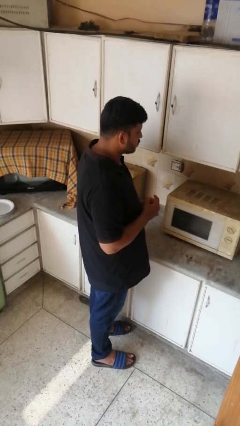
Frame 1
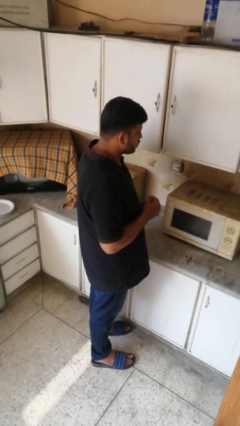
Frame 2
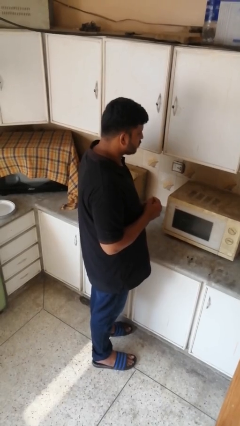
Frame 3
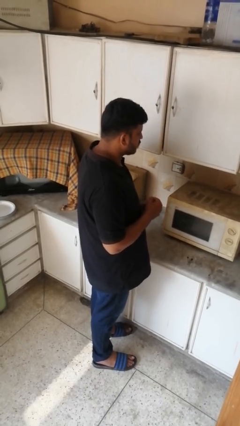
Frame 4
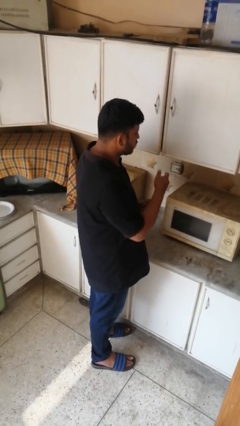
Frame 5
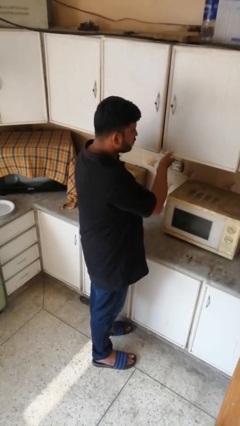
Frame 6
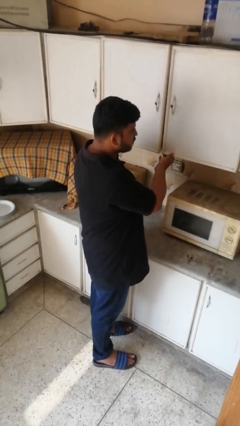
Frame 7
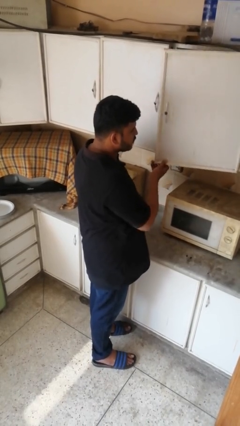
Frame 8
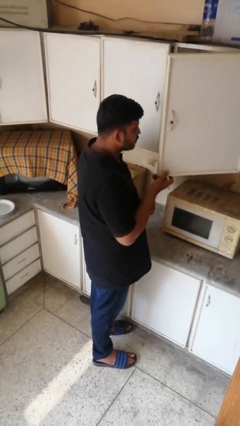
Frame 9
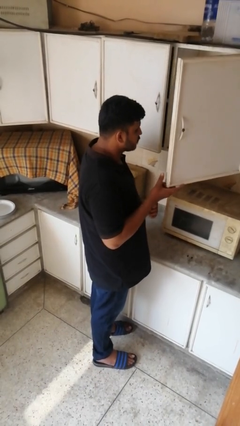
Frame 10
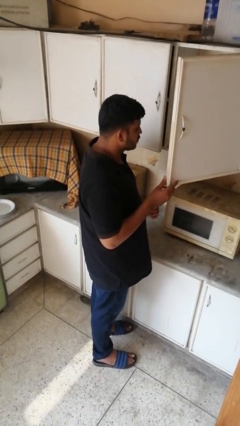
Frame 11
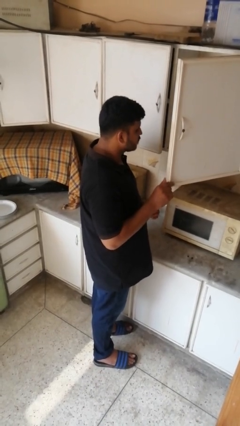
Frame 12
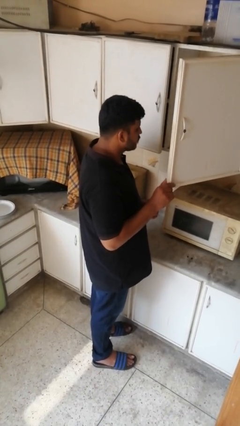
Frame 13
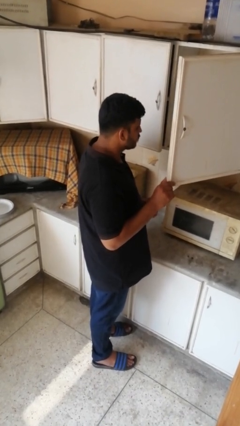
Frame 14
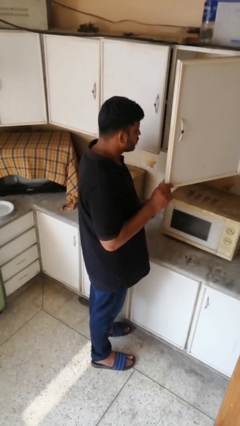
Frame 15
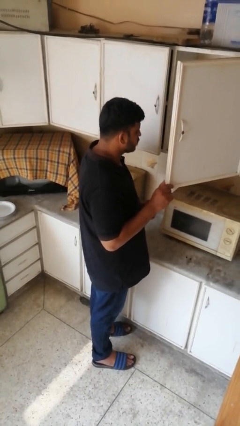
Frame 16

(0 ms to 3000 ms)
person opens cabinet

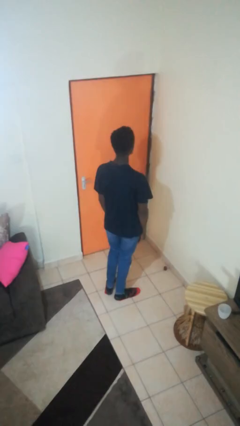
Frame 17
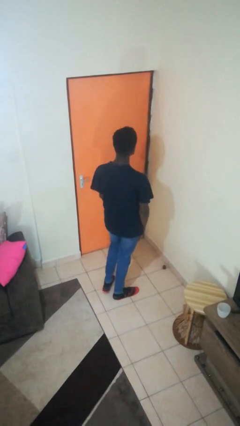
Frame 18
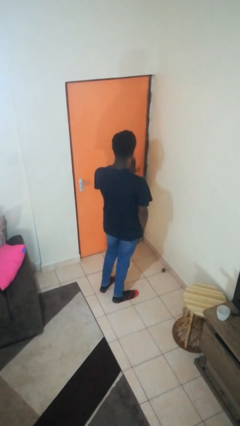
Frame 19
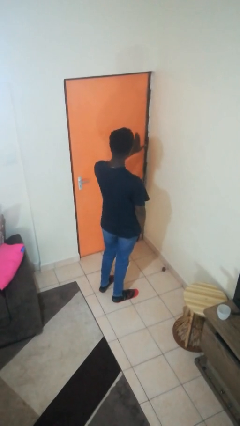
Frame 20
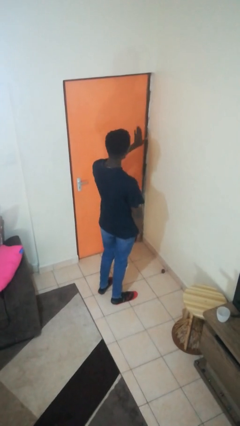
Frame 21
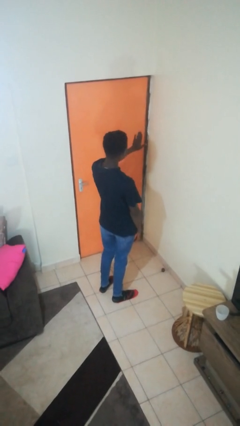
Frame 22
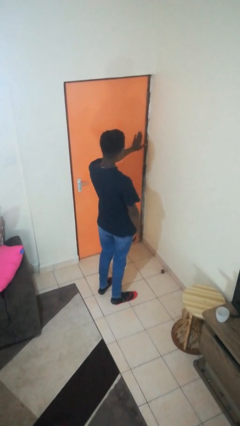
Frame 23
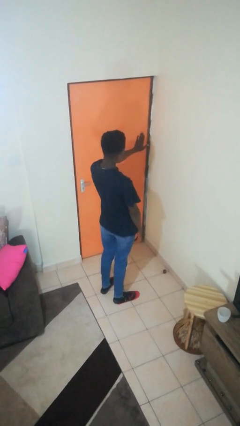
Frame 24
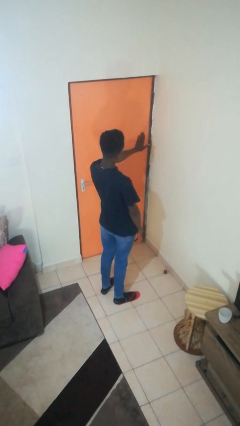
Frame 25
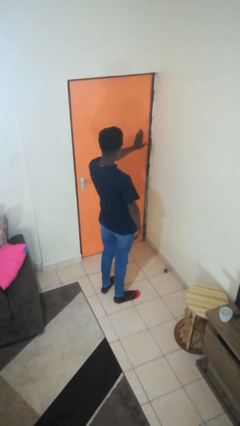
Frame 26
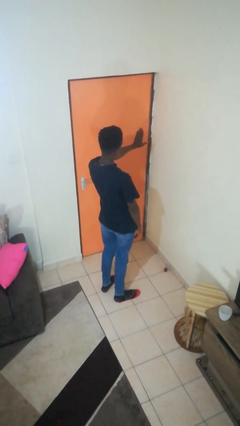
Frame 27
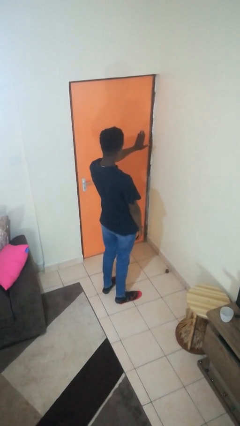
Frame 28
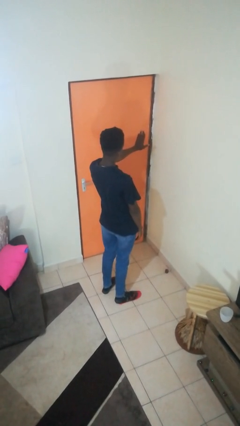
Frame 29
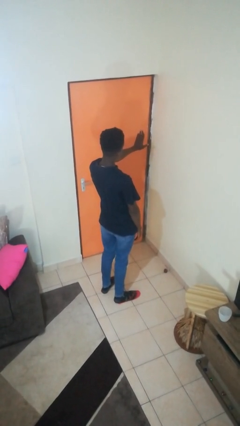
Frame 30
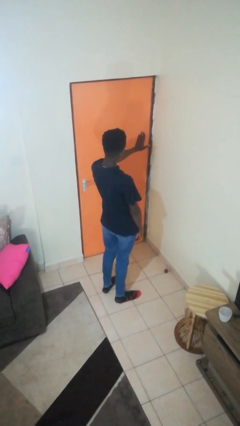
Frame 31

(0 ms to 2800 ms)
person gestures stop

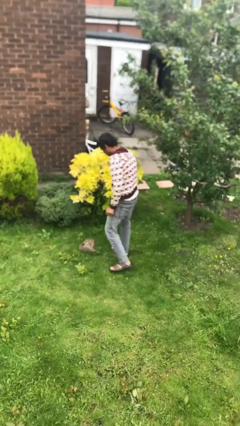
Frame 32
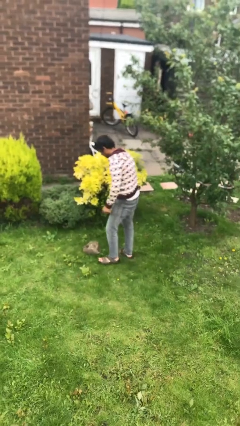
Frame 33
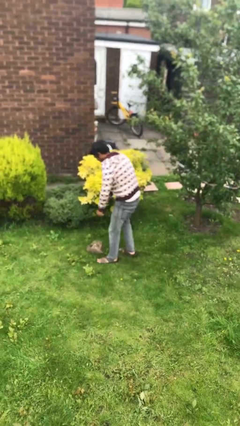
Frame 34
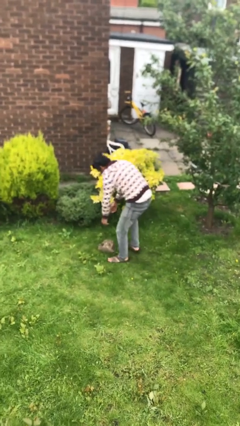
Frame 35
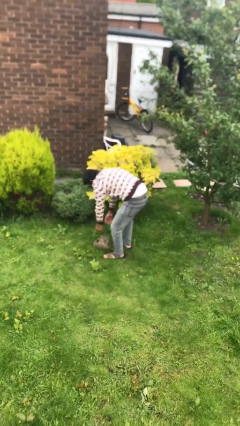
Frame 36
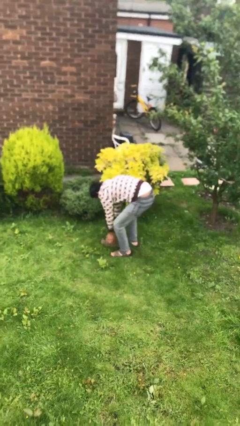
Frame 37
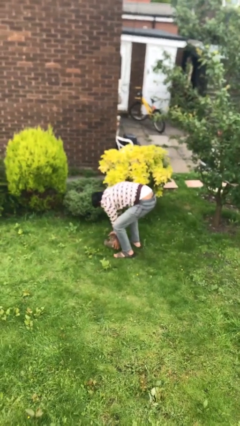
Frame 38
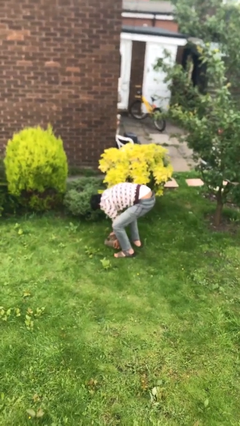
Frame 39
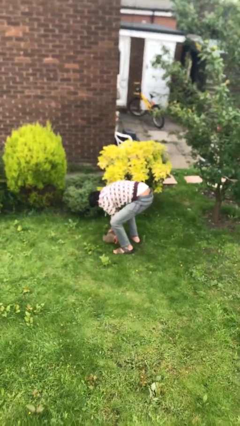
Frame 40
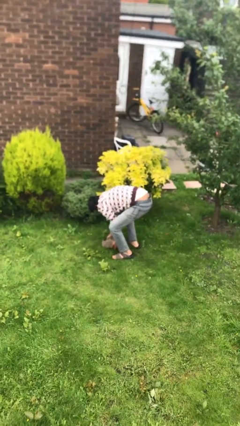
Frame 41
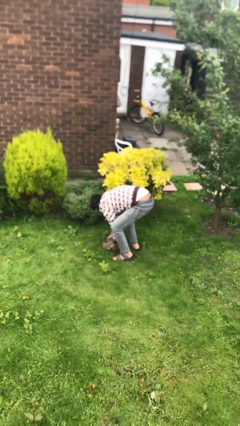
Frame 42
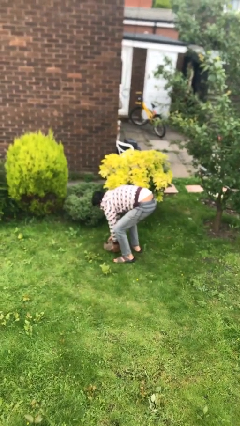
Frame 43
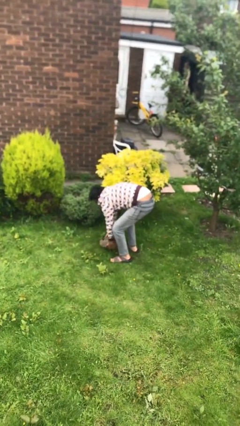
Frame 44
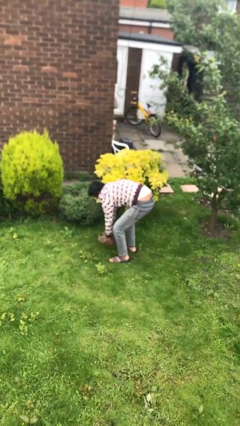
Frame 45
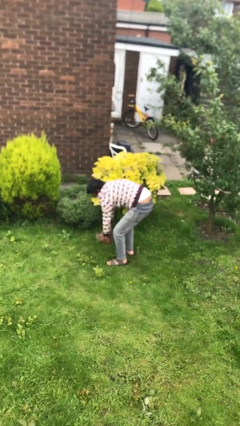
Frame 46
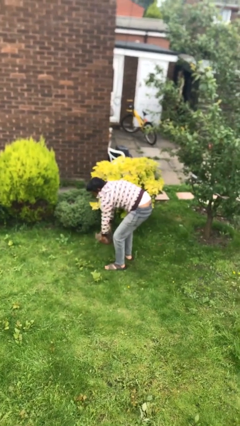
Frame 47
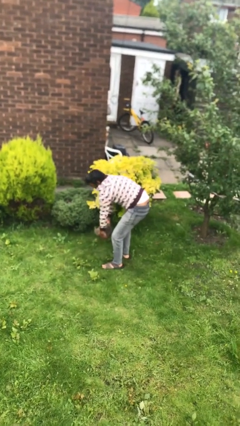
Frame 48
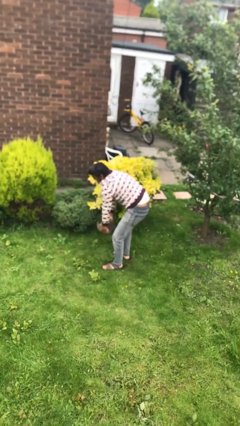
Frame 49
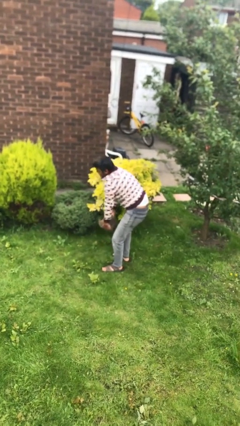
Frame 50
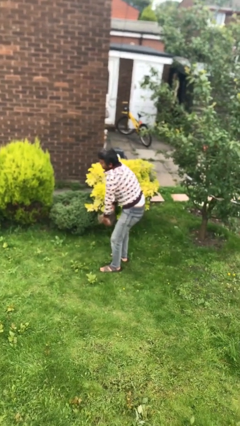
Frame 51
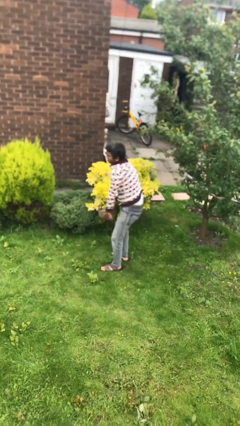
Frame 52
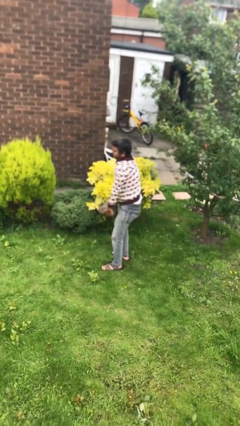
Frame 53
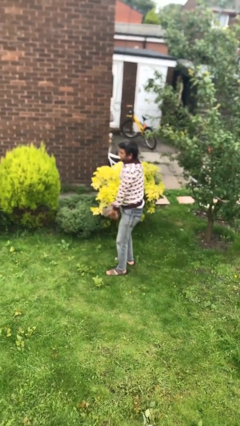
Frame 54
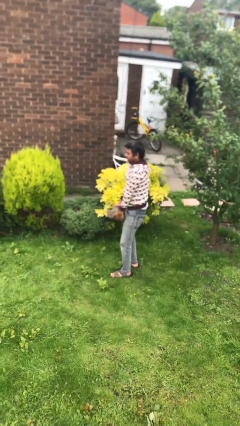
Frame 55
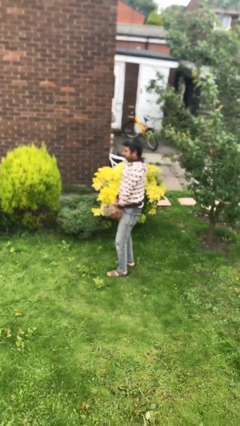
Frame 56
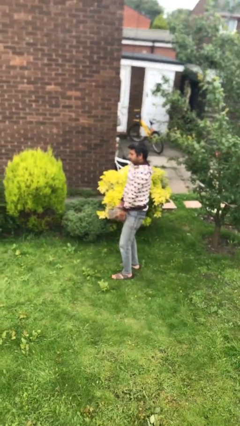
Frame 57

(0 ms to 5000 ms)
person picks up object from floor

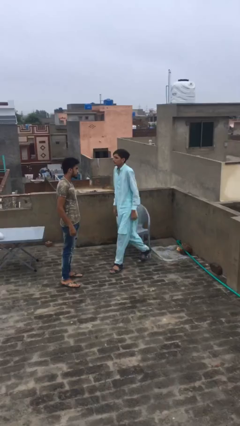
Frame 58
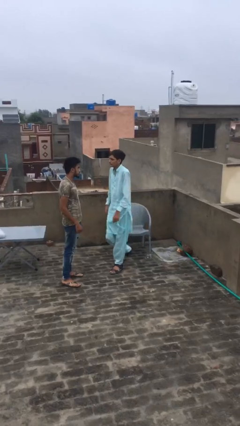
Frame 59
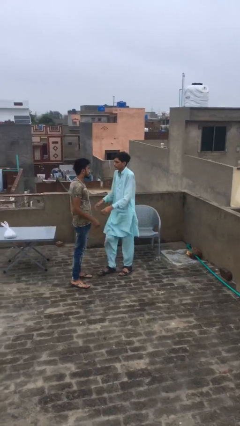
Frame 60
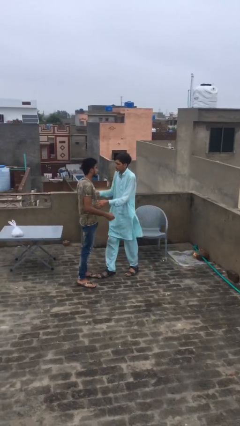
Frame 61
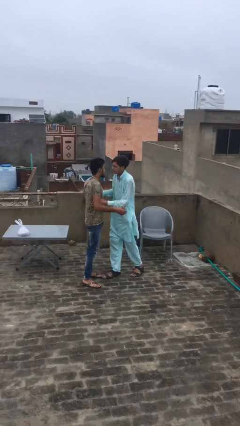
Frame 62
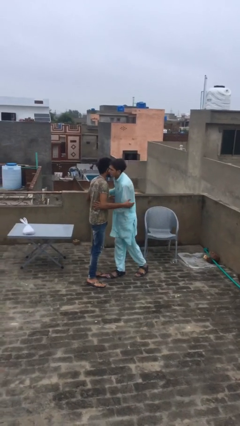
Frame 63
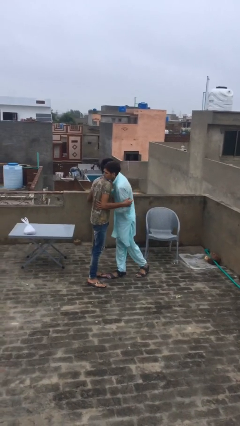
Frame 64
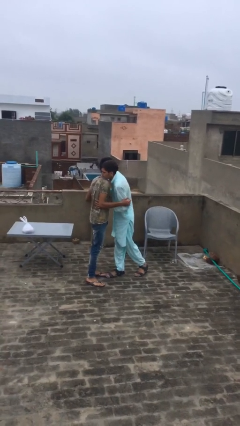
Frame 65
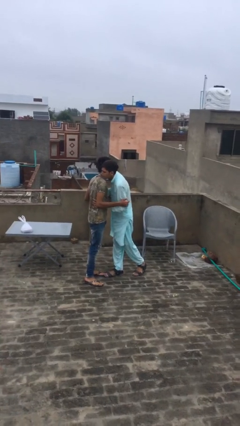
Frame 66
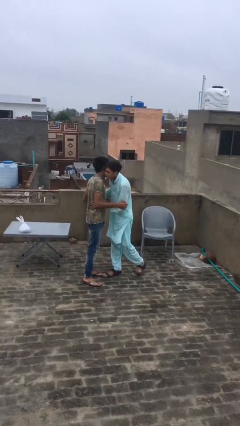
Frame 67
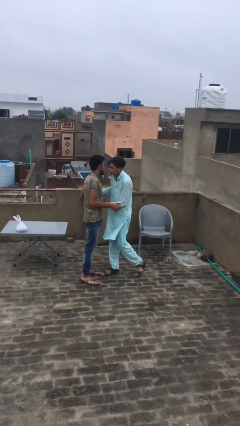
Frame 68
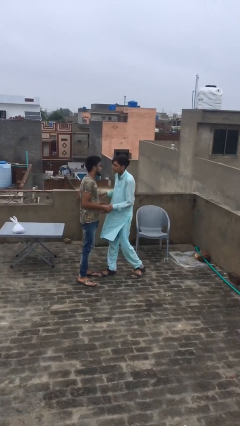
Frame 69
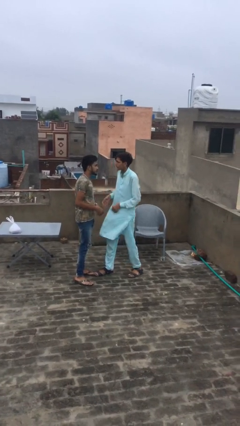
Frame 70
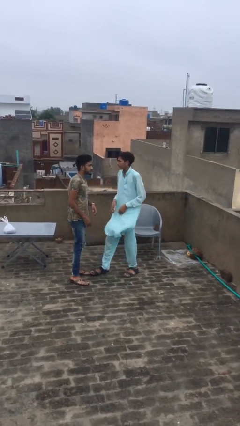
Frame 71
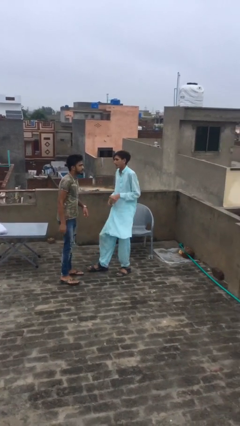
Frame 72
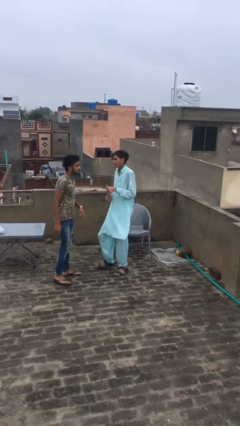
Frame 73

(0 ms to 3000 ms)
person embraces person

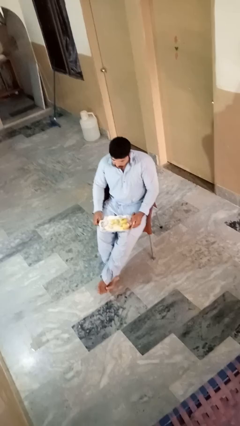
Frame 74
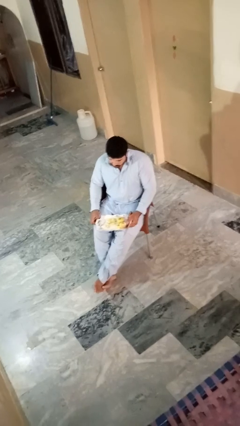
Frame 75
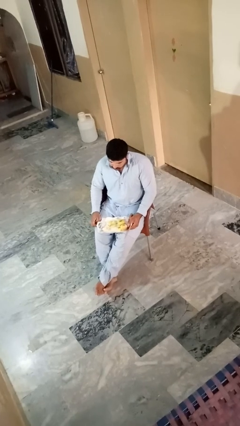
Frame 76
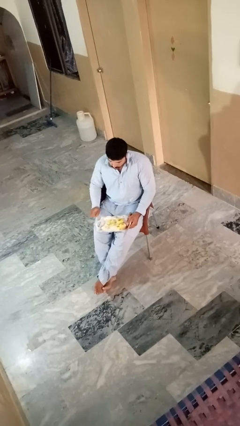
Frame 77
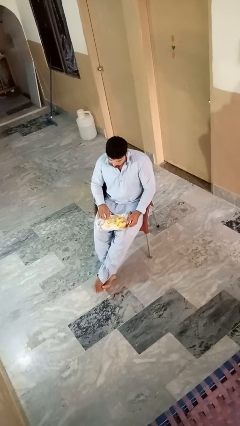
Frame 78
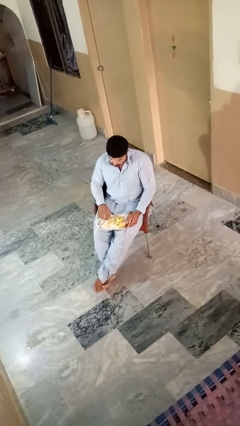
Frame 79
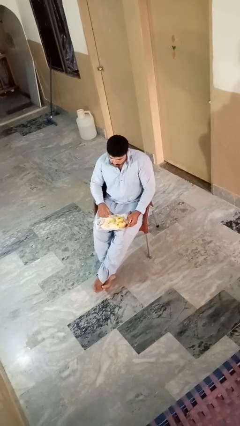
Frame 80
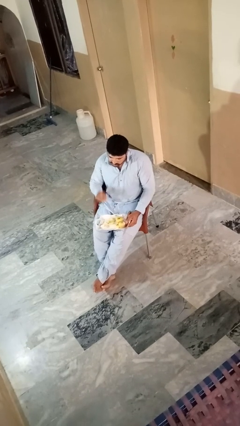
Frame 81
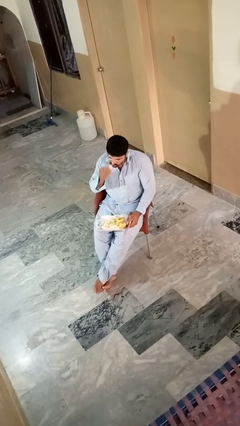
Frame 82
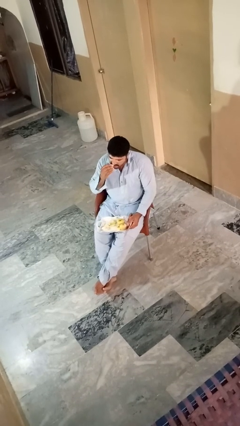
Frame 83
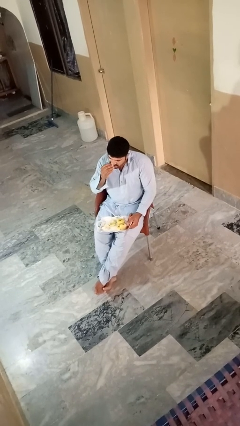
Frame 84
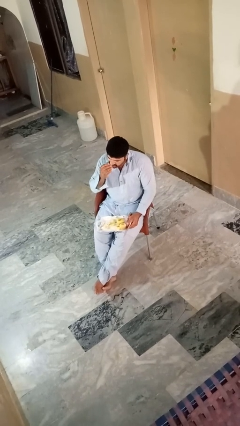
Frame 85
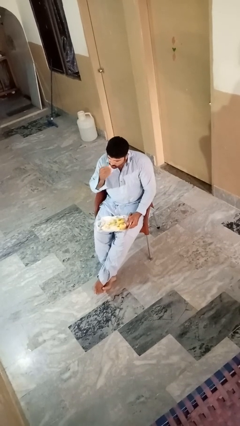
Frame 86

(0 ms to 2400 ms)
person eats apple

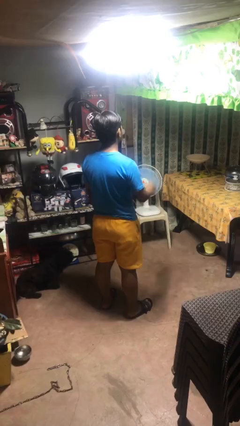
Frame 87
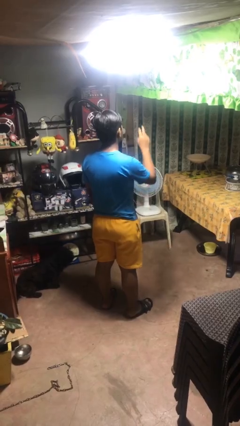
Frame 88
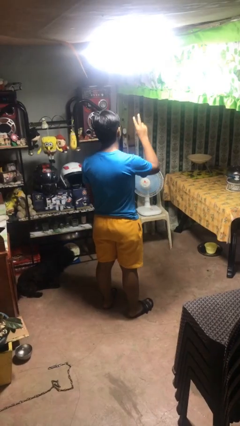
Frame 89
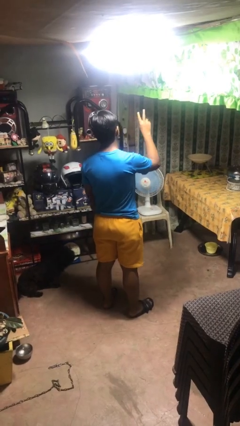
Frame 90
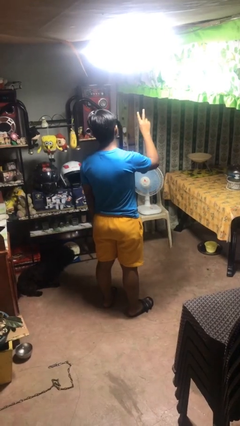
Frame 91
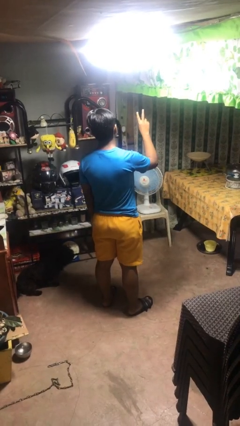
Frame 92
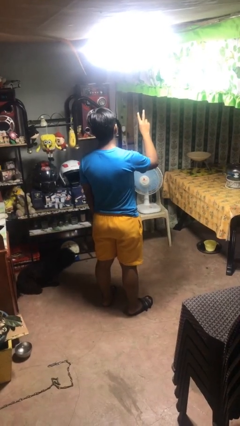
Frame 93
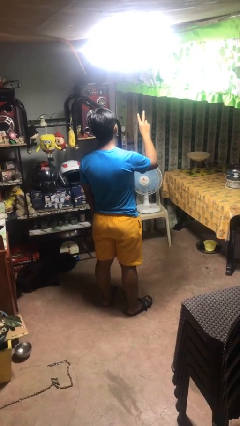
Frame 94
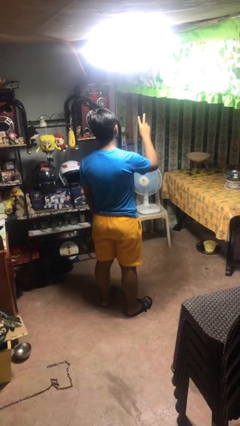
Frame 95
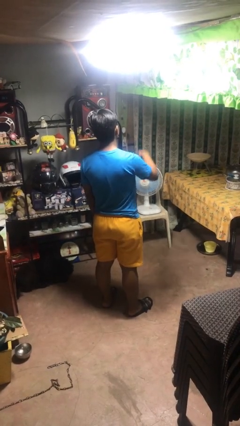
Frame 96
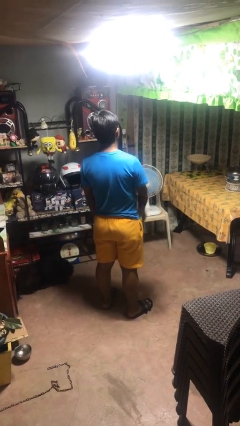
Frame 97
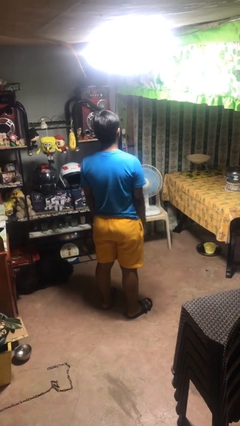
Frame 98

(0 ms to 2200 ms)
person gestures peace
